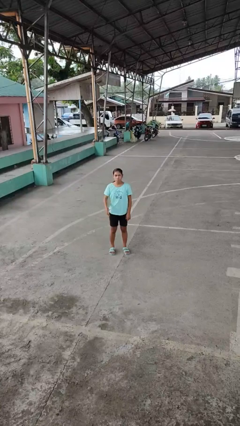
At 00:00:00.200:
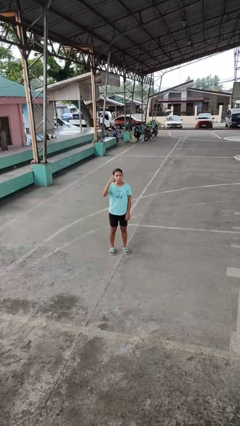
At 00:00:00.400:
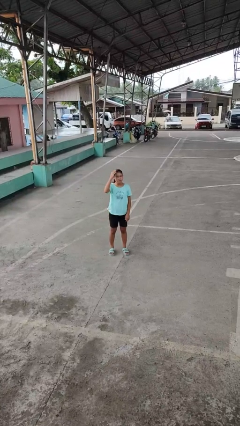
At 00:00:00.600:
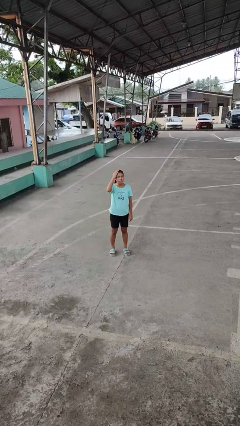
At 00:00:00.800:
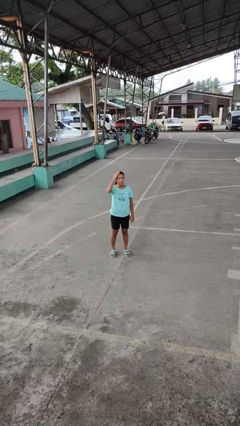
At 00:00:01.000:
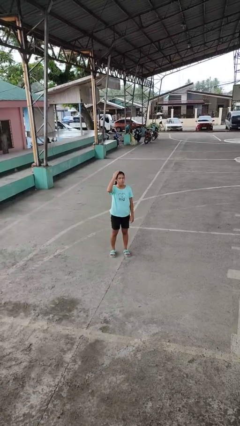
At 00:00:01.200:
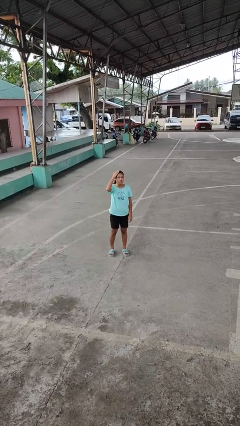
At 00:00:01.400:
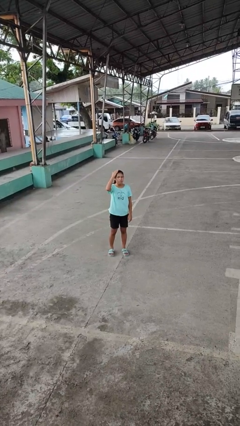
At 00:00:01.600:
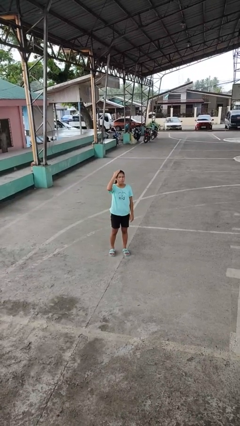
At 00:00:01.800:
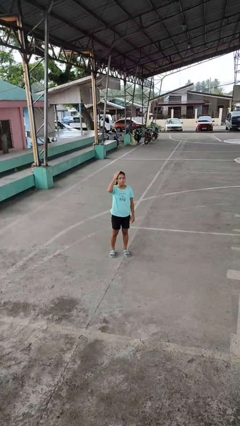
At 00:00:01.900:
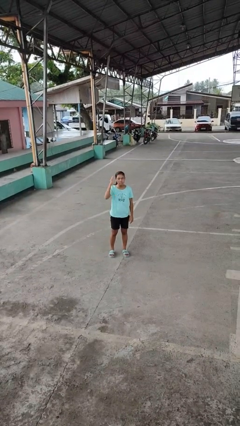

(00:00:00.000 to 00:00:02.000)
person pats head

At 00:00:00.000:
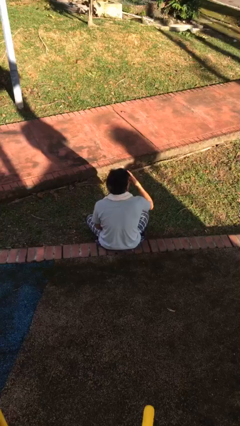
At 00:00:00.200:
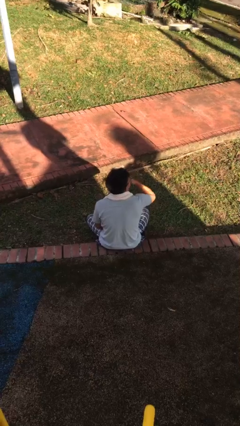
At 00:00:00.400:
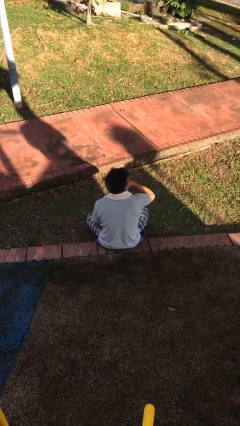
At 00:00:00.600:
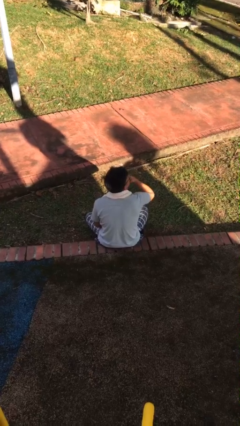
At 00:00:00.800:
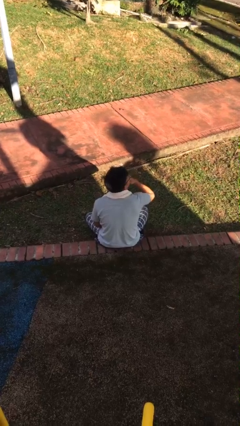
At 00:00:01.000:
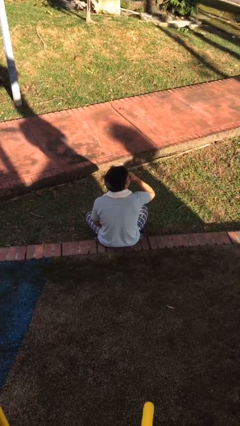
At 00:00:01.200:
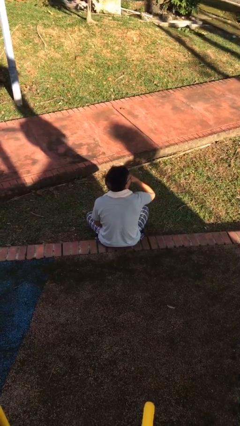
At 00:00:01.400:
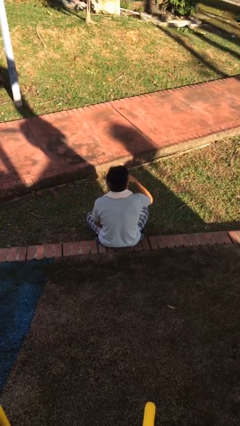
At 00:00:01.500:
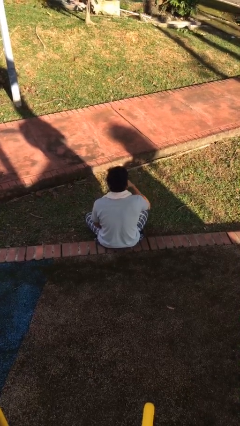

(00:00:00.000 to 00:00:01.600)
person strokes chin

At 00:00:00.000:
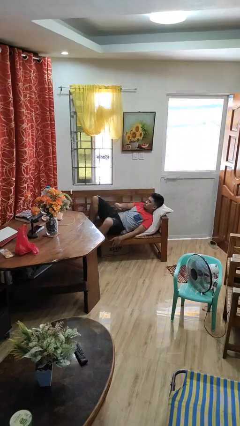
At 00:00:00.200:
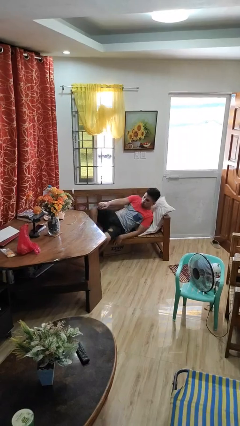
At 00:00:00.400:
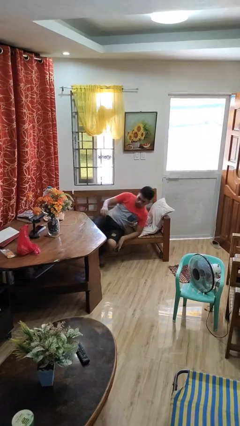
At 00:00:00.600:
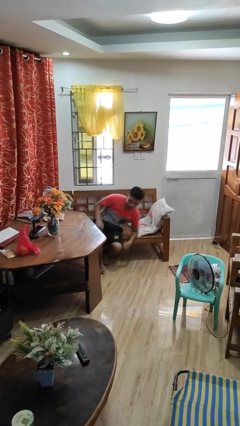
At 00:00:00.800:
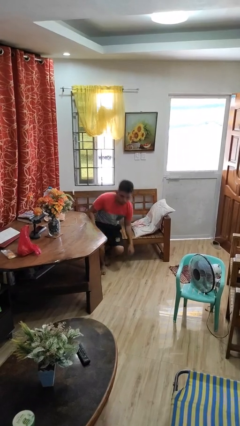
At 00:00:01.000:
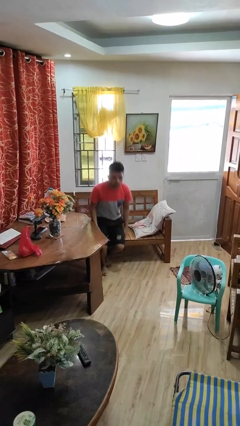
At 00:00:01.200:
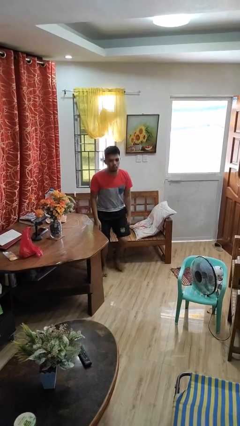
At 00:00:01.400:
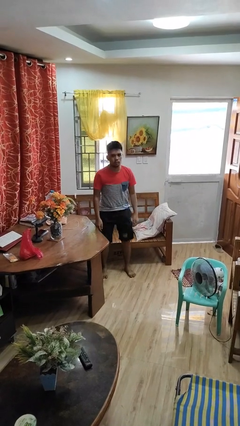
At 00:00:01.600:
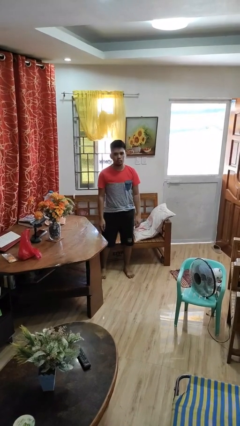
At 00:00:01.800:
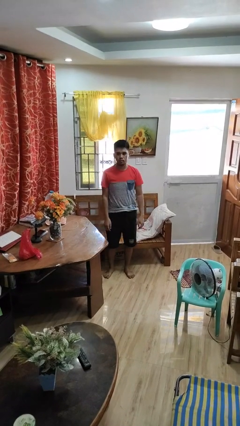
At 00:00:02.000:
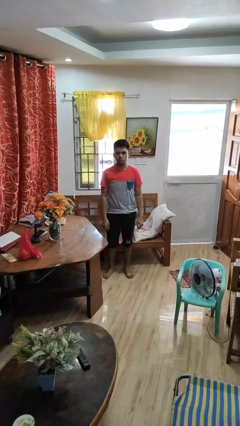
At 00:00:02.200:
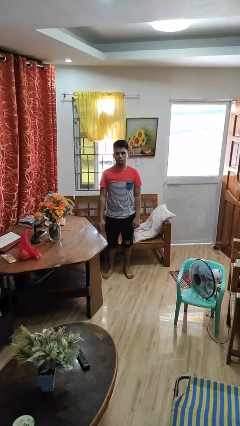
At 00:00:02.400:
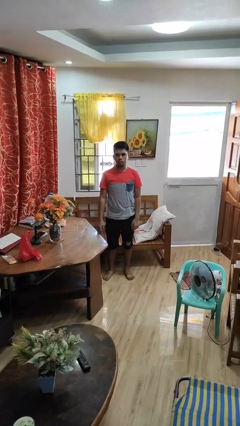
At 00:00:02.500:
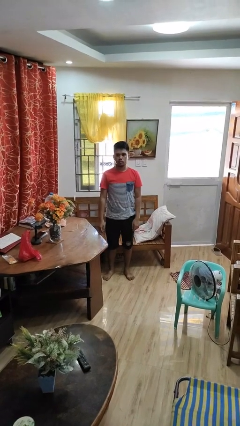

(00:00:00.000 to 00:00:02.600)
person stands up

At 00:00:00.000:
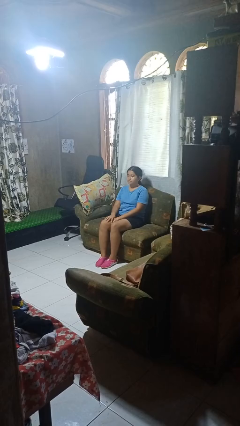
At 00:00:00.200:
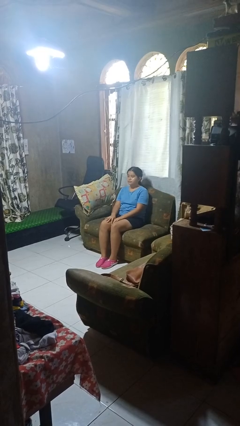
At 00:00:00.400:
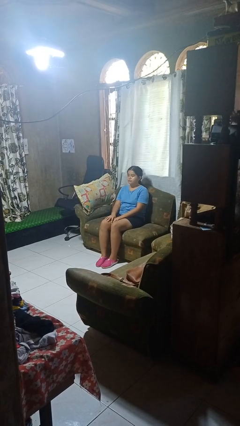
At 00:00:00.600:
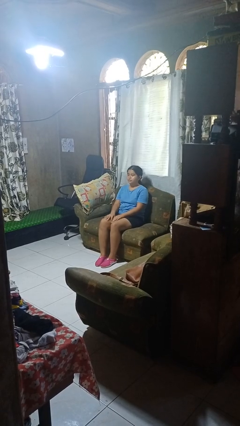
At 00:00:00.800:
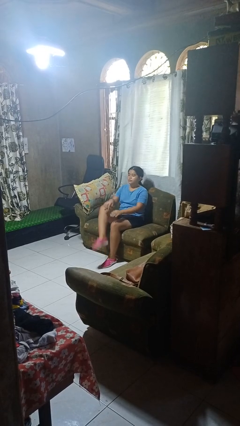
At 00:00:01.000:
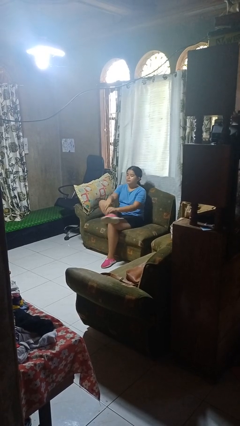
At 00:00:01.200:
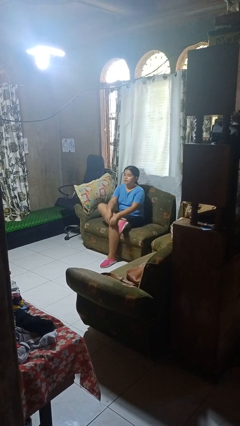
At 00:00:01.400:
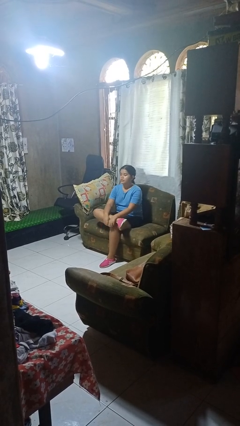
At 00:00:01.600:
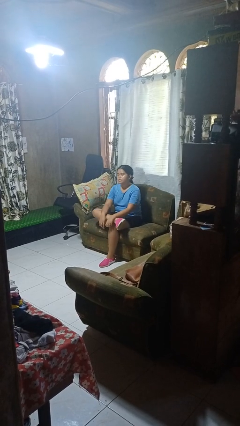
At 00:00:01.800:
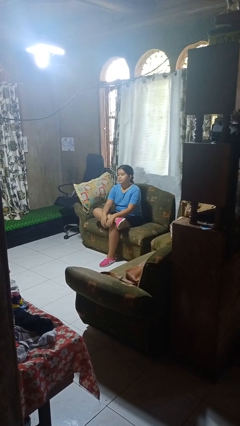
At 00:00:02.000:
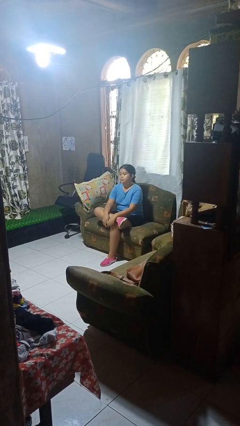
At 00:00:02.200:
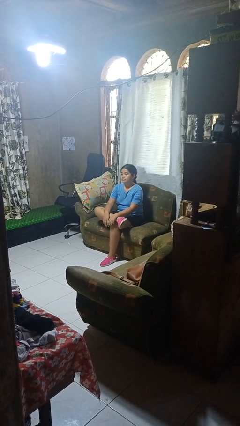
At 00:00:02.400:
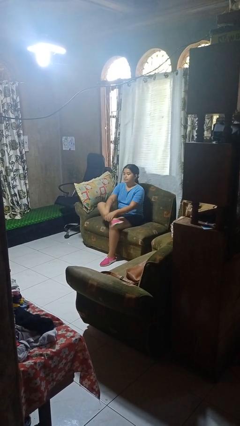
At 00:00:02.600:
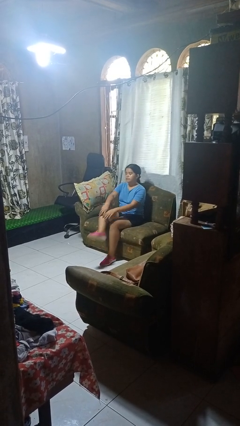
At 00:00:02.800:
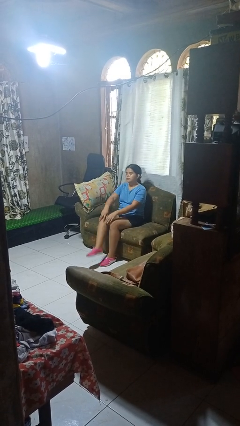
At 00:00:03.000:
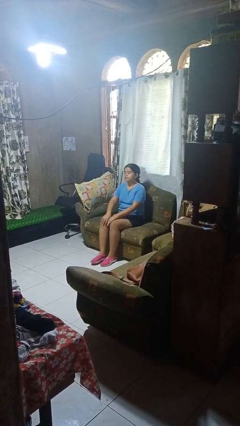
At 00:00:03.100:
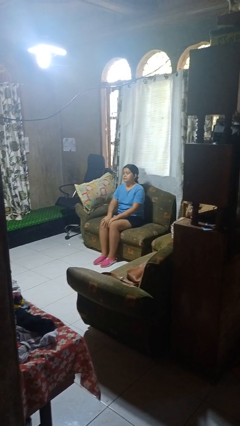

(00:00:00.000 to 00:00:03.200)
person crosses legs

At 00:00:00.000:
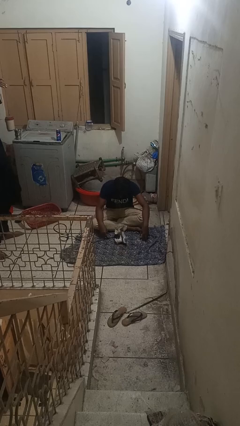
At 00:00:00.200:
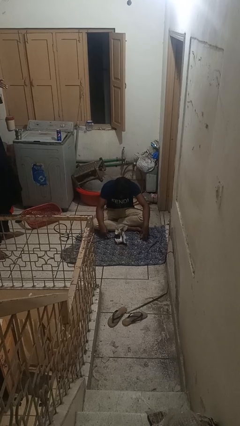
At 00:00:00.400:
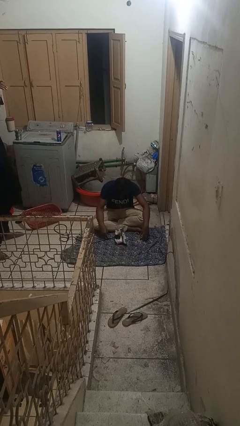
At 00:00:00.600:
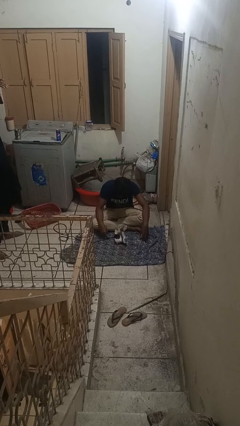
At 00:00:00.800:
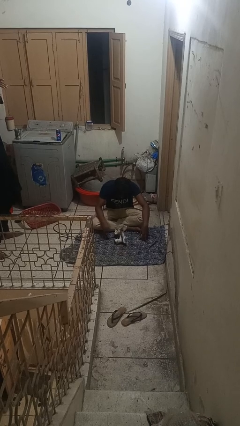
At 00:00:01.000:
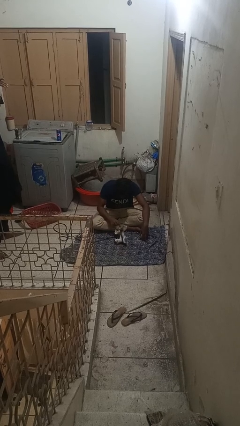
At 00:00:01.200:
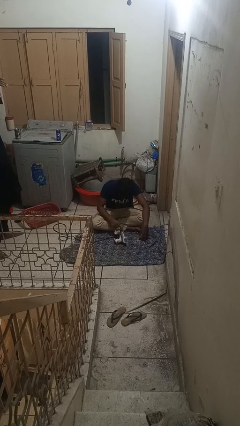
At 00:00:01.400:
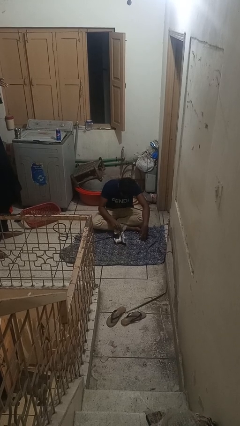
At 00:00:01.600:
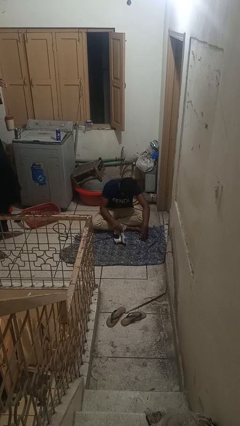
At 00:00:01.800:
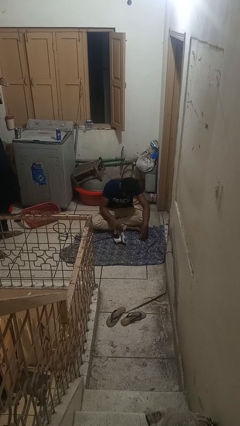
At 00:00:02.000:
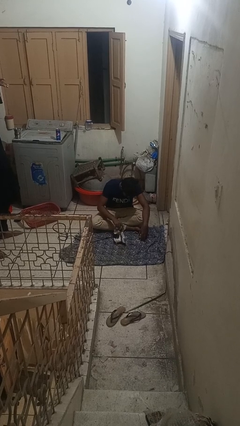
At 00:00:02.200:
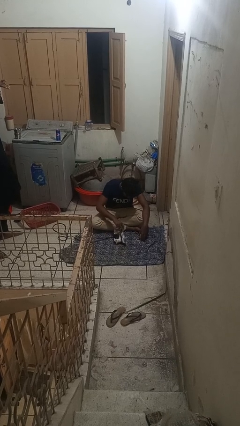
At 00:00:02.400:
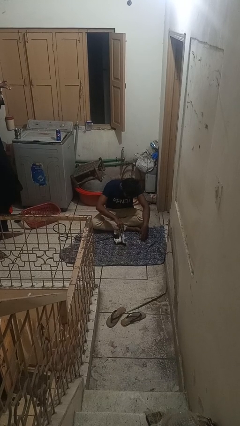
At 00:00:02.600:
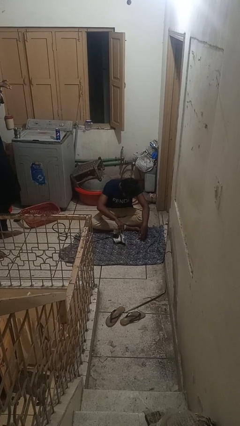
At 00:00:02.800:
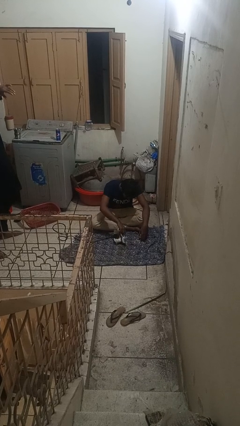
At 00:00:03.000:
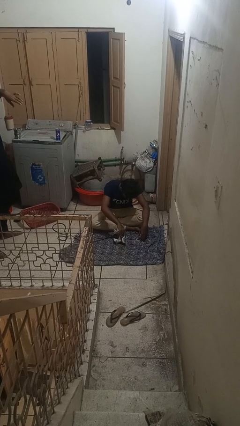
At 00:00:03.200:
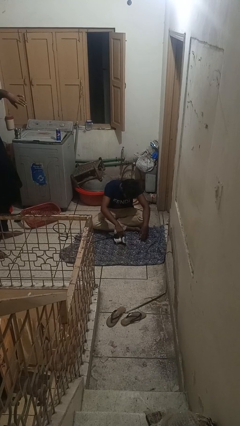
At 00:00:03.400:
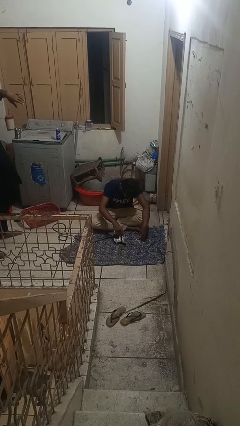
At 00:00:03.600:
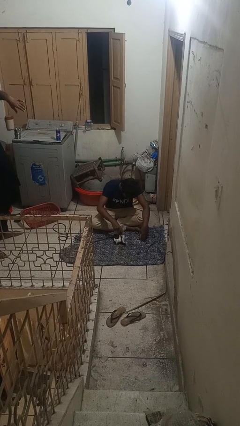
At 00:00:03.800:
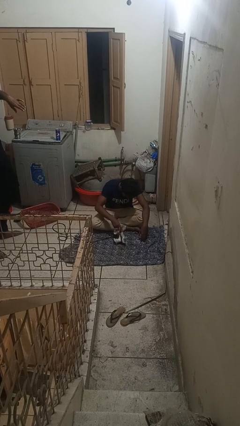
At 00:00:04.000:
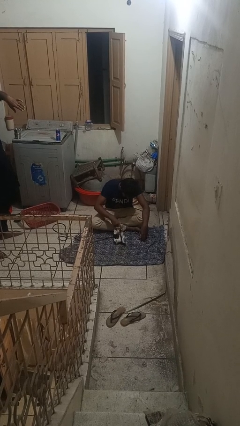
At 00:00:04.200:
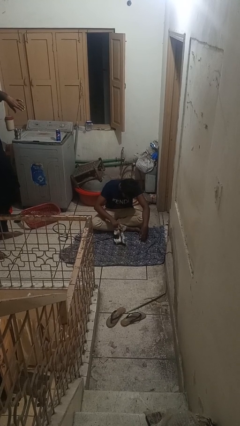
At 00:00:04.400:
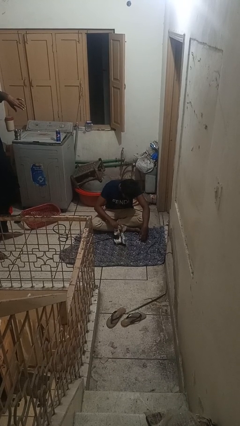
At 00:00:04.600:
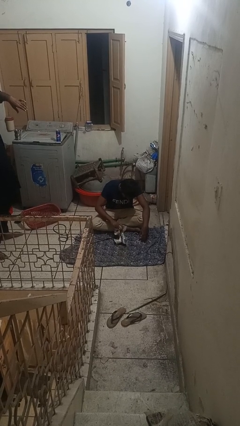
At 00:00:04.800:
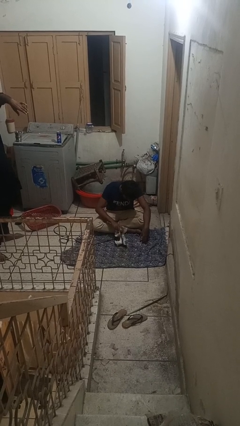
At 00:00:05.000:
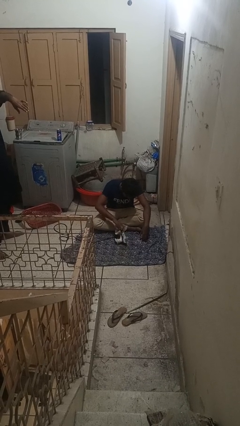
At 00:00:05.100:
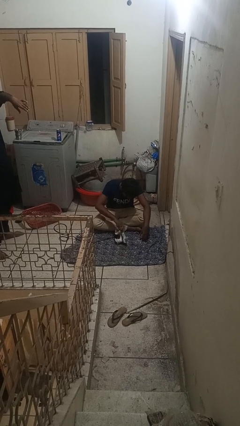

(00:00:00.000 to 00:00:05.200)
person taps object with finger

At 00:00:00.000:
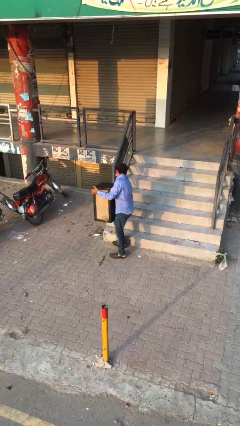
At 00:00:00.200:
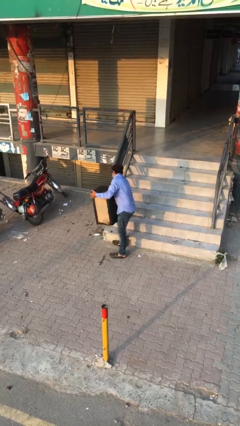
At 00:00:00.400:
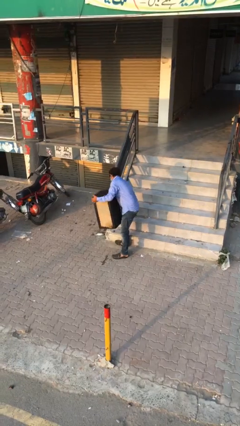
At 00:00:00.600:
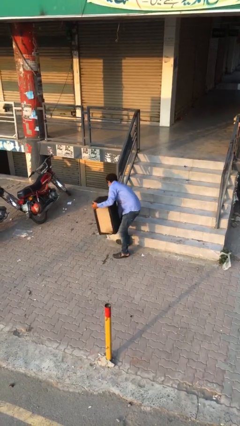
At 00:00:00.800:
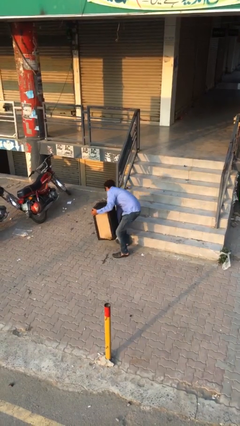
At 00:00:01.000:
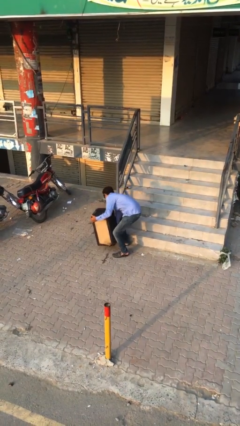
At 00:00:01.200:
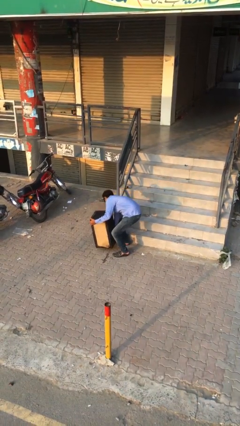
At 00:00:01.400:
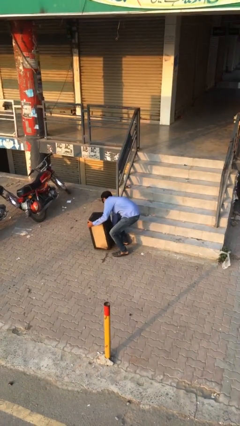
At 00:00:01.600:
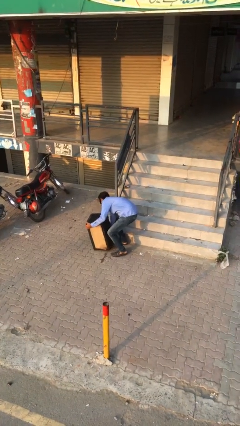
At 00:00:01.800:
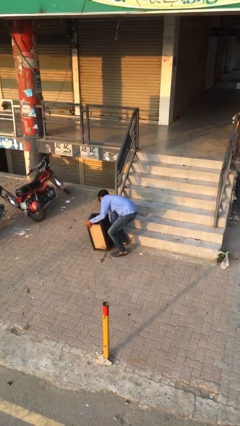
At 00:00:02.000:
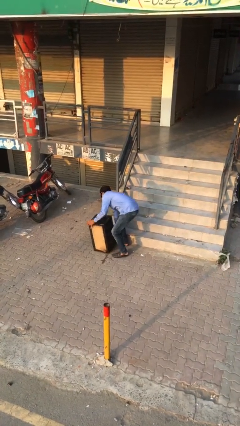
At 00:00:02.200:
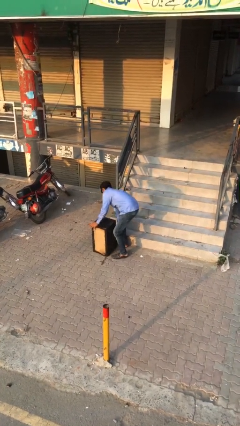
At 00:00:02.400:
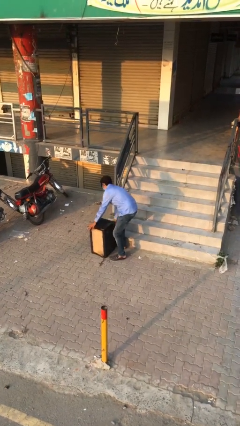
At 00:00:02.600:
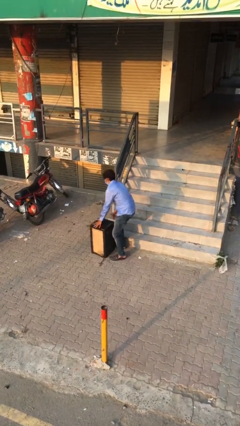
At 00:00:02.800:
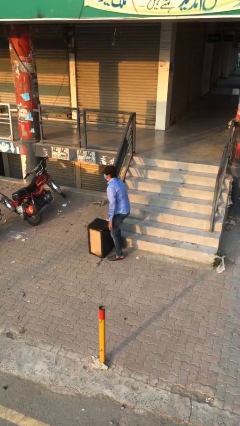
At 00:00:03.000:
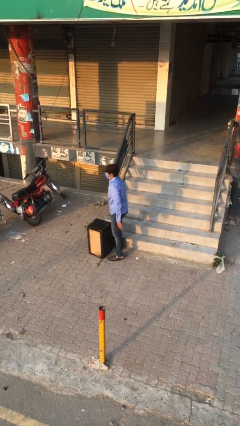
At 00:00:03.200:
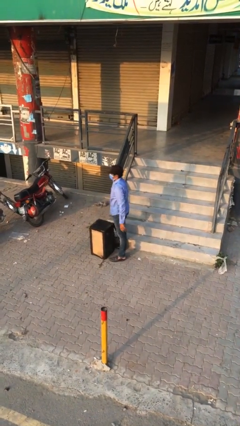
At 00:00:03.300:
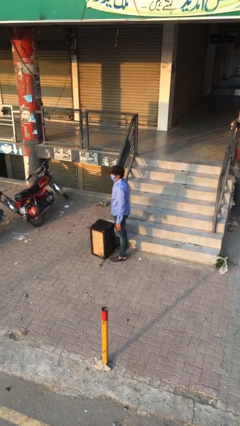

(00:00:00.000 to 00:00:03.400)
person puts down object on floor
